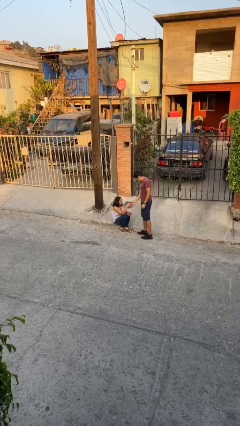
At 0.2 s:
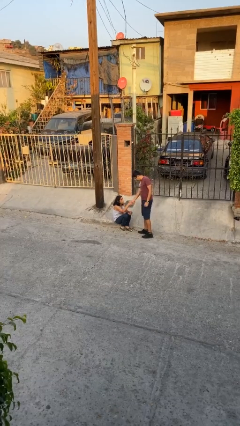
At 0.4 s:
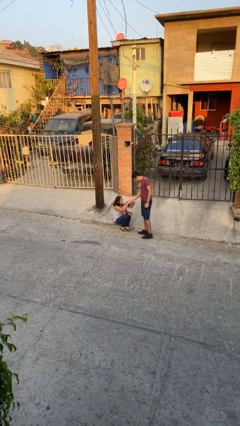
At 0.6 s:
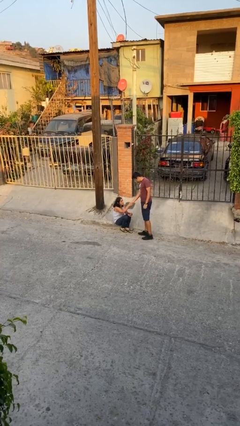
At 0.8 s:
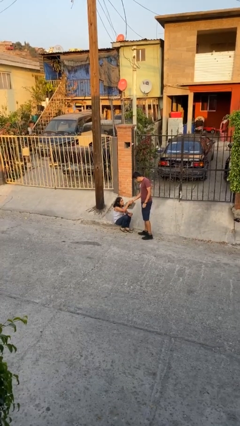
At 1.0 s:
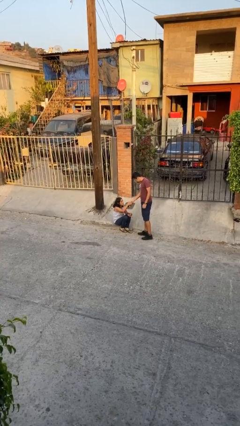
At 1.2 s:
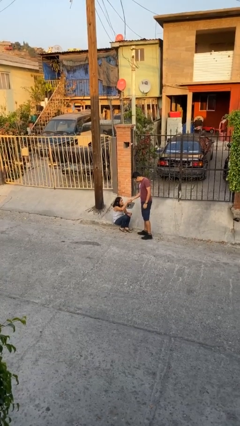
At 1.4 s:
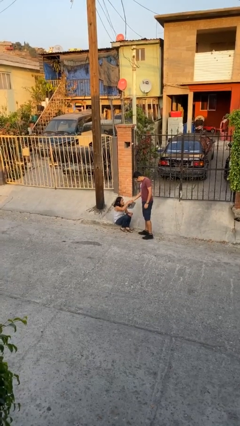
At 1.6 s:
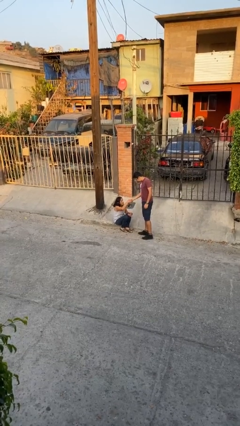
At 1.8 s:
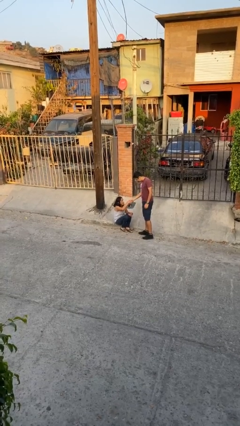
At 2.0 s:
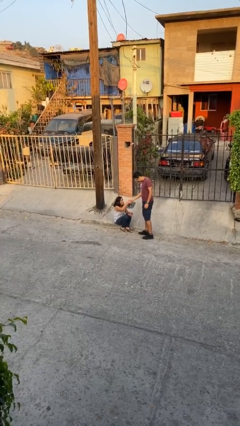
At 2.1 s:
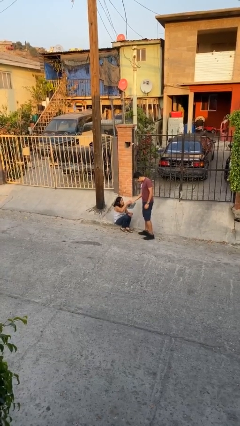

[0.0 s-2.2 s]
person shakes hand

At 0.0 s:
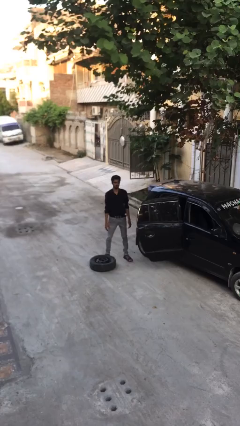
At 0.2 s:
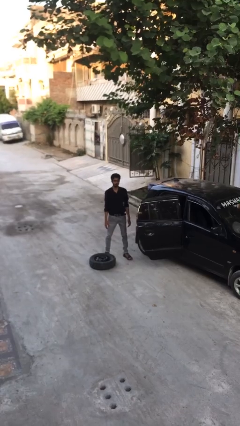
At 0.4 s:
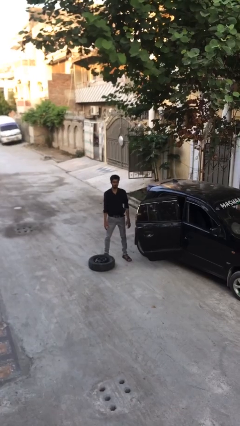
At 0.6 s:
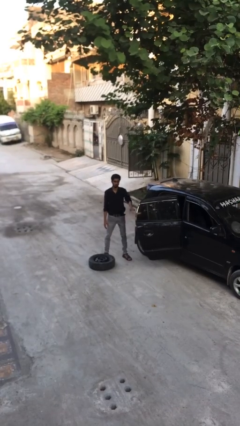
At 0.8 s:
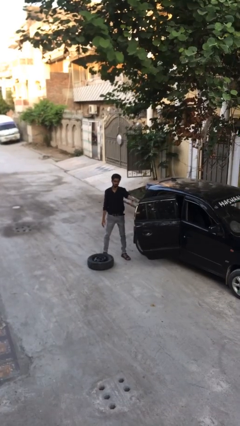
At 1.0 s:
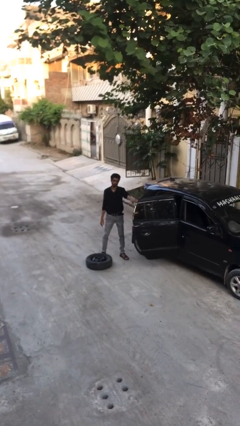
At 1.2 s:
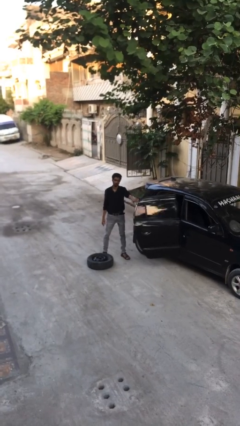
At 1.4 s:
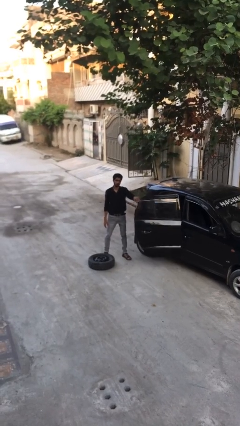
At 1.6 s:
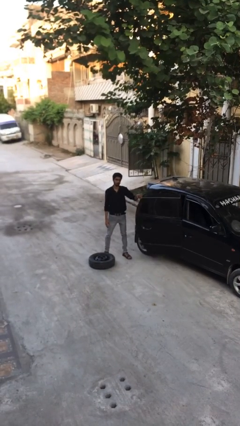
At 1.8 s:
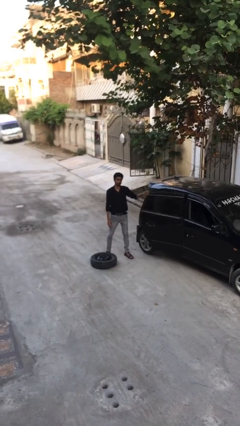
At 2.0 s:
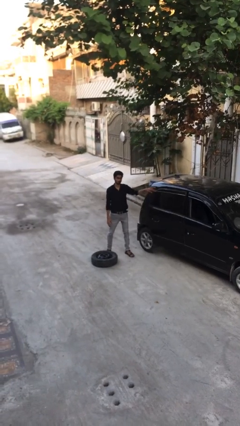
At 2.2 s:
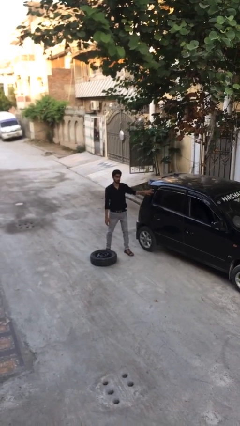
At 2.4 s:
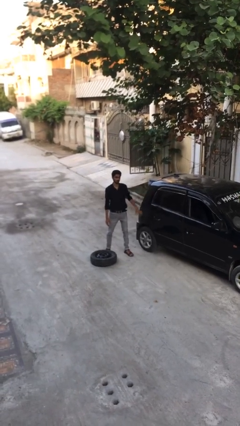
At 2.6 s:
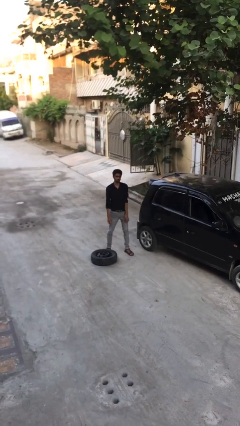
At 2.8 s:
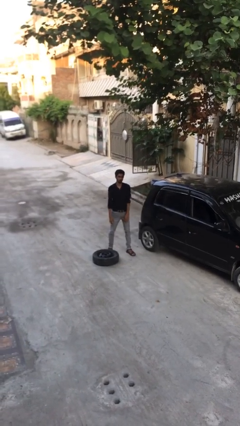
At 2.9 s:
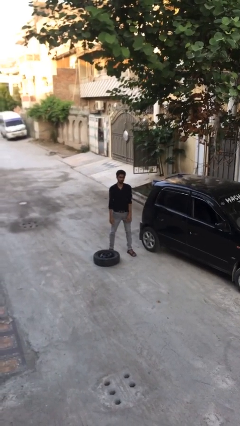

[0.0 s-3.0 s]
person closes car door

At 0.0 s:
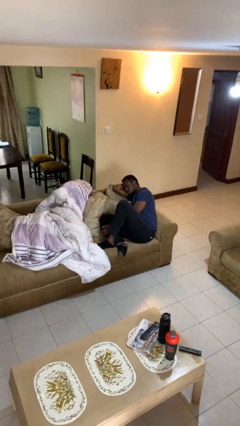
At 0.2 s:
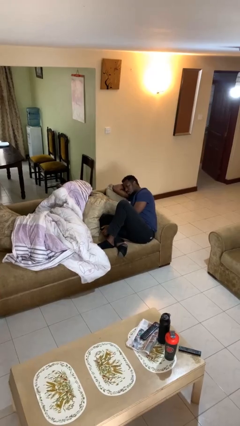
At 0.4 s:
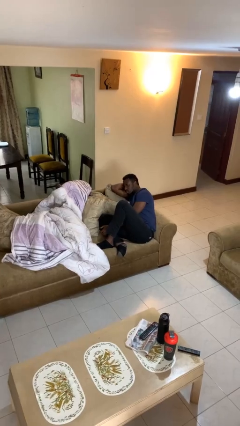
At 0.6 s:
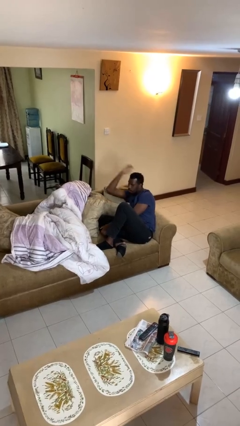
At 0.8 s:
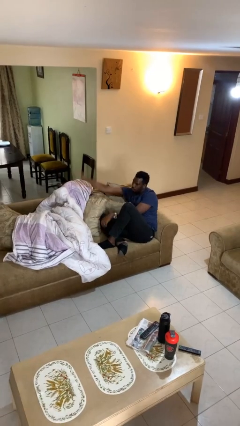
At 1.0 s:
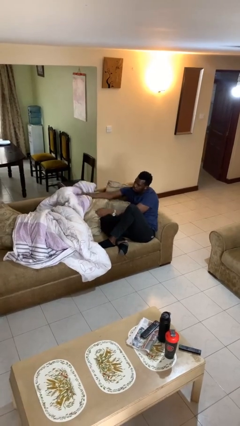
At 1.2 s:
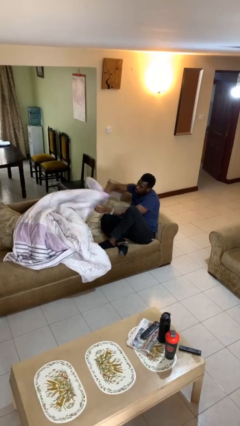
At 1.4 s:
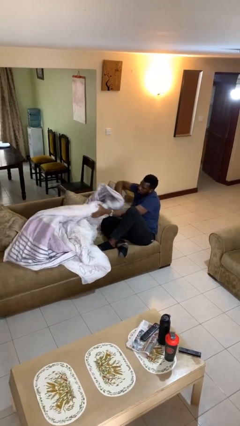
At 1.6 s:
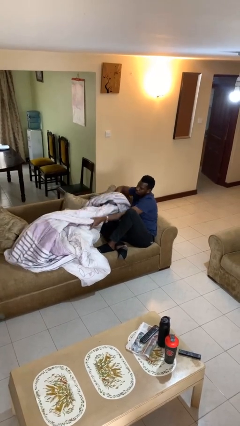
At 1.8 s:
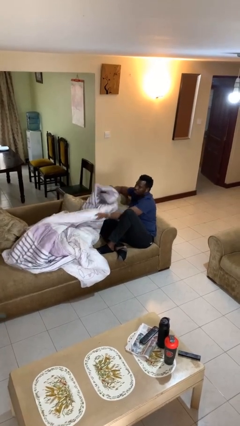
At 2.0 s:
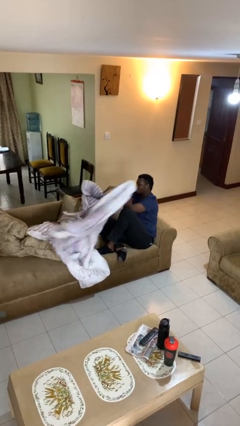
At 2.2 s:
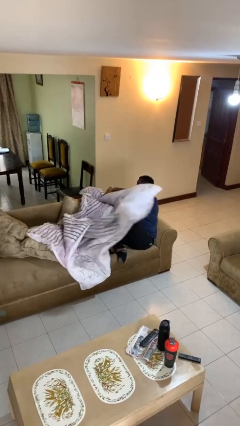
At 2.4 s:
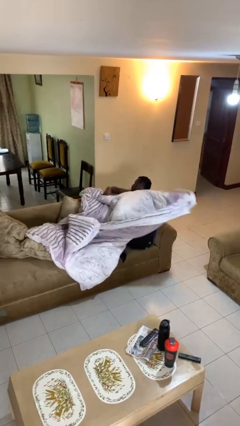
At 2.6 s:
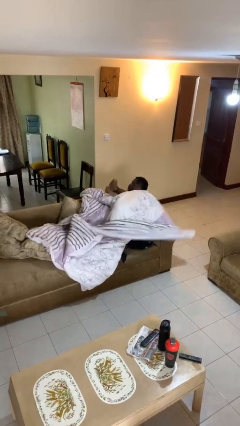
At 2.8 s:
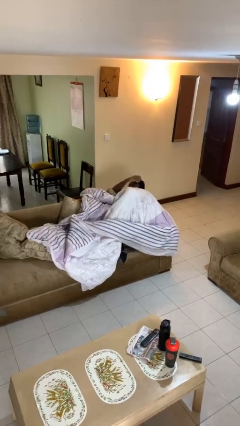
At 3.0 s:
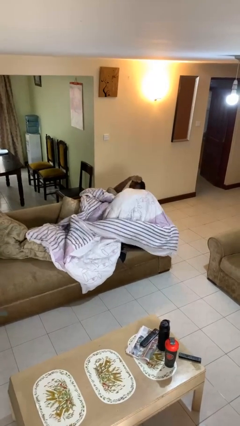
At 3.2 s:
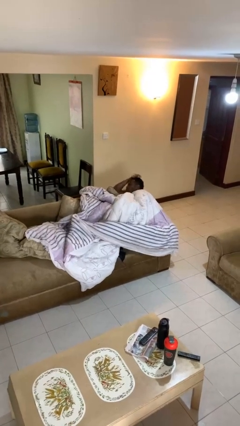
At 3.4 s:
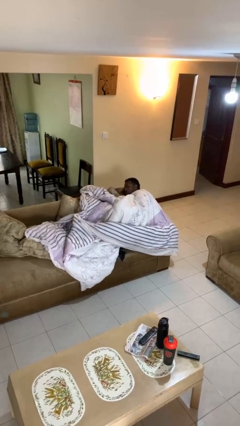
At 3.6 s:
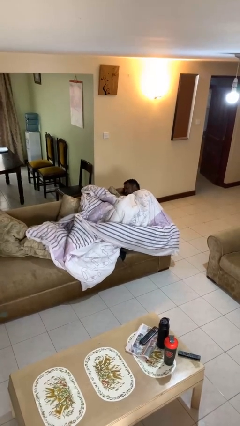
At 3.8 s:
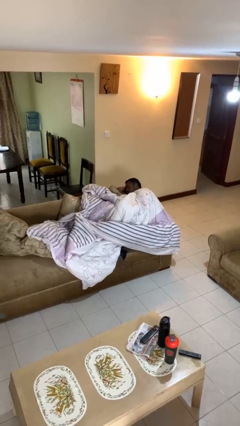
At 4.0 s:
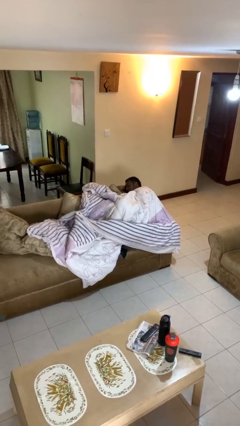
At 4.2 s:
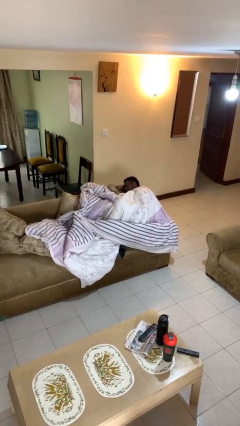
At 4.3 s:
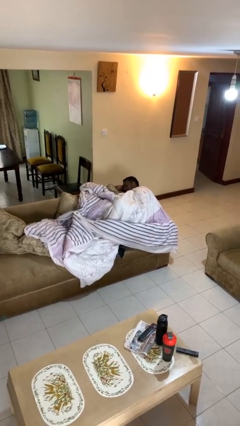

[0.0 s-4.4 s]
person covers with blanket

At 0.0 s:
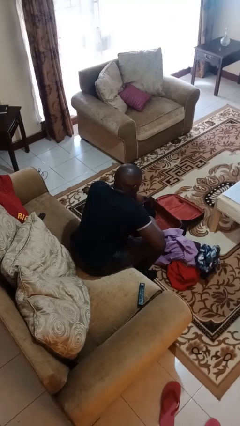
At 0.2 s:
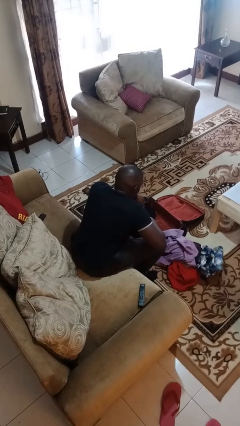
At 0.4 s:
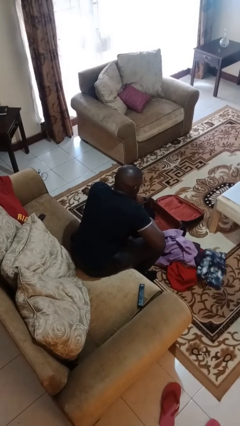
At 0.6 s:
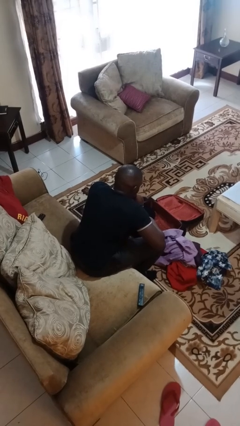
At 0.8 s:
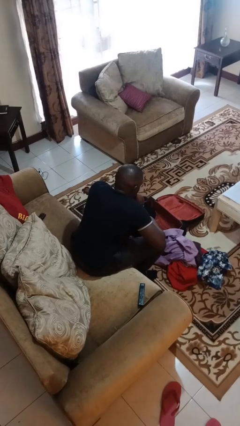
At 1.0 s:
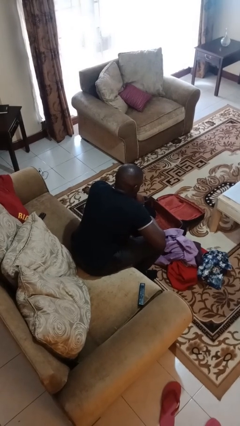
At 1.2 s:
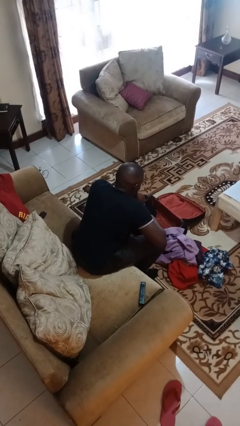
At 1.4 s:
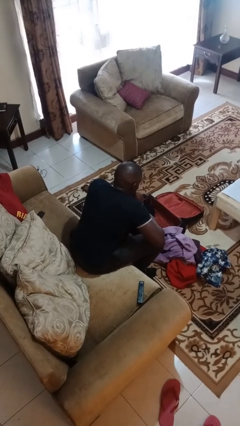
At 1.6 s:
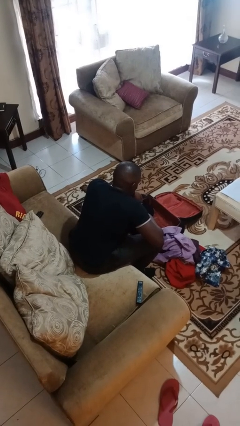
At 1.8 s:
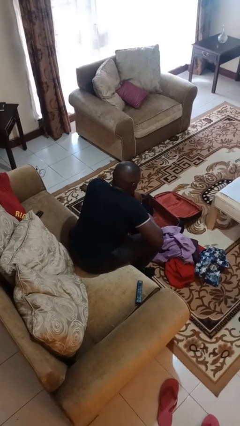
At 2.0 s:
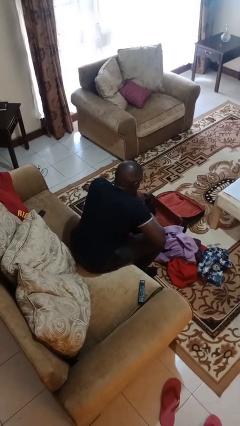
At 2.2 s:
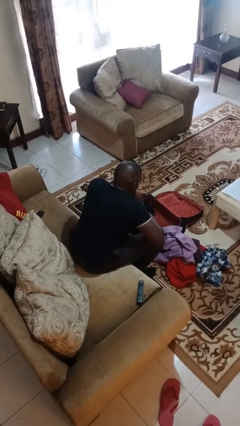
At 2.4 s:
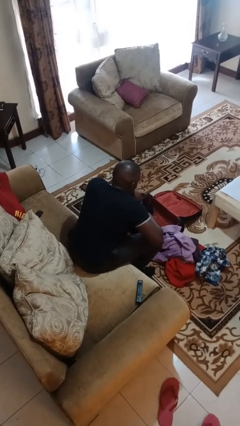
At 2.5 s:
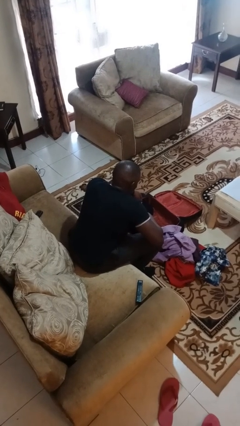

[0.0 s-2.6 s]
person unloads clothes from suitcase

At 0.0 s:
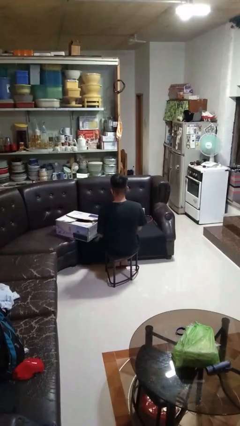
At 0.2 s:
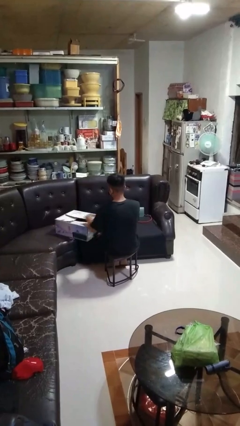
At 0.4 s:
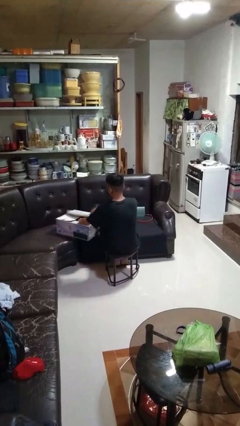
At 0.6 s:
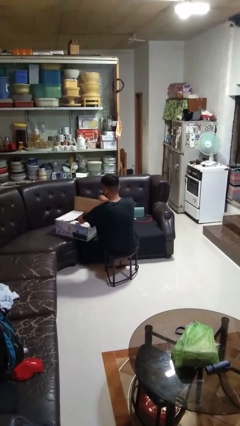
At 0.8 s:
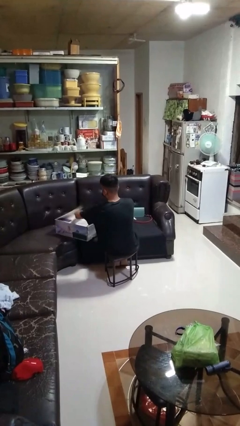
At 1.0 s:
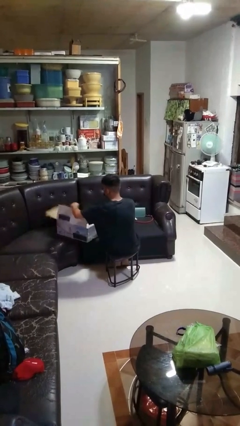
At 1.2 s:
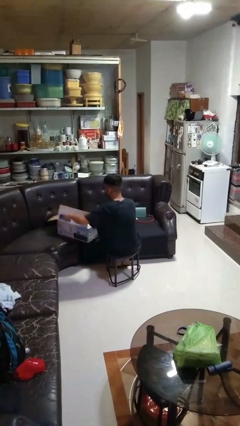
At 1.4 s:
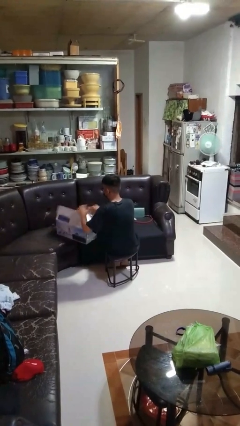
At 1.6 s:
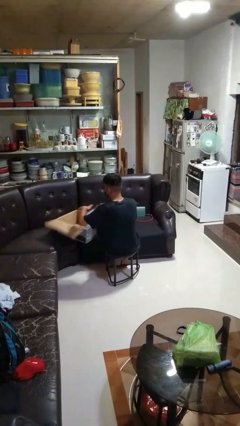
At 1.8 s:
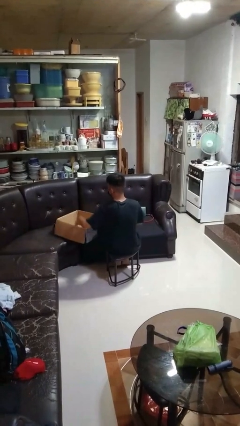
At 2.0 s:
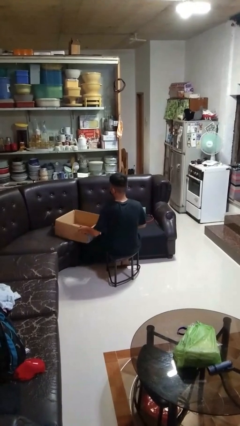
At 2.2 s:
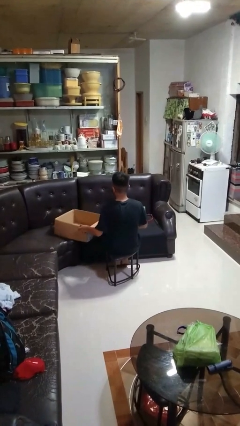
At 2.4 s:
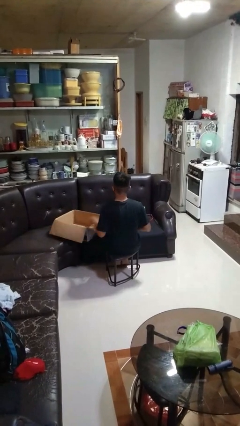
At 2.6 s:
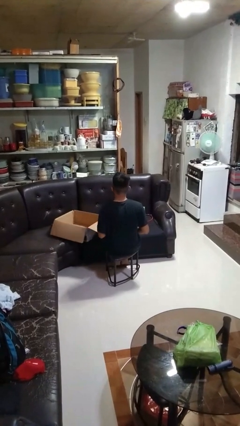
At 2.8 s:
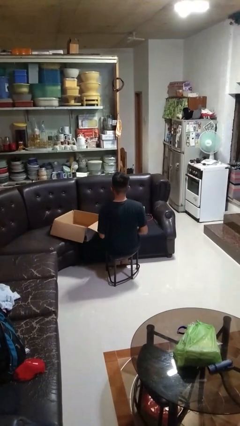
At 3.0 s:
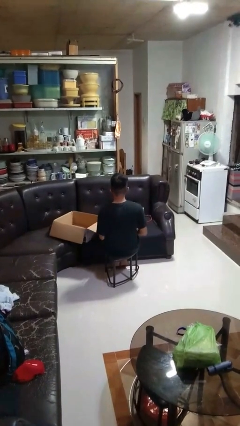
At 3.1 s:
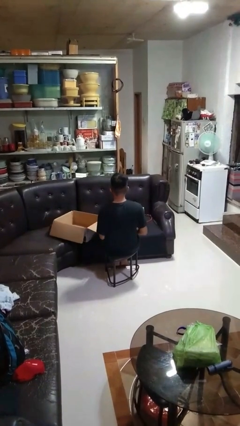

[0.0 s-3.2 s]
person opens box

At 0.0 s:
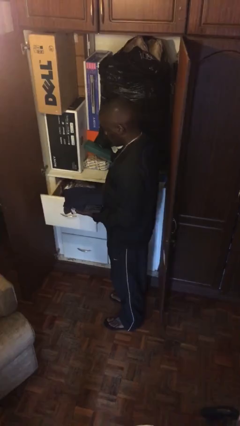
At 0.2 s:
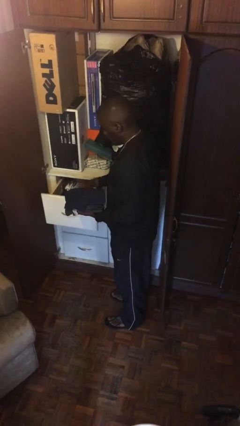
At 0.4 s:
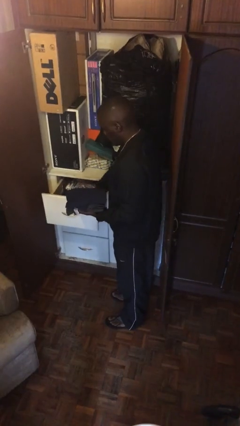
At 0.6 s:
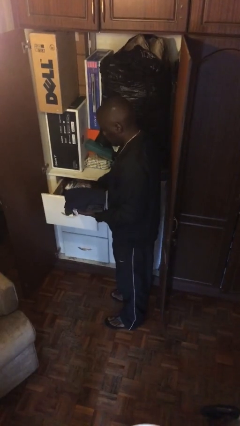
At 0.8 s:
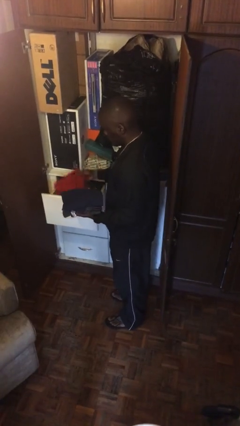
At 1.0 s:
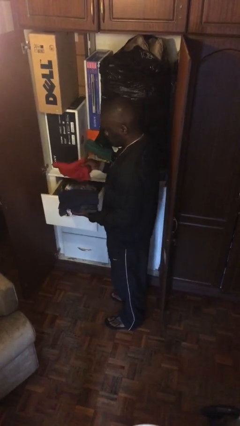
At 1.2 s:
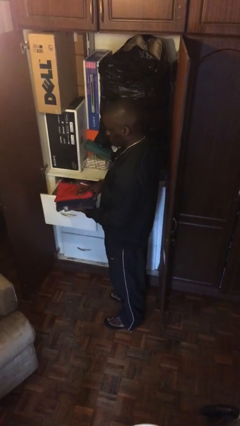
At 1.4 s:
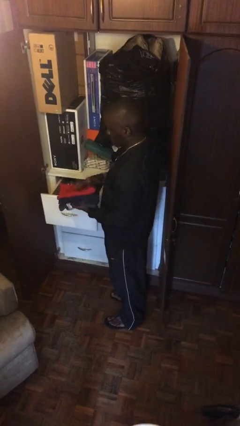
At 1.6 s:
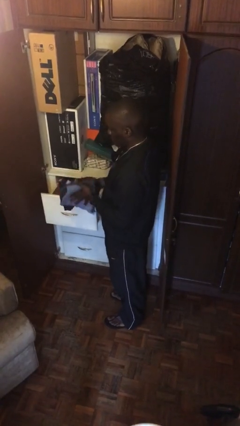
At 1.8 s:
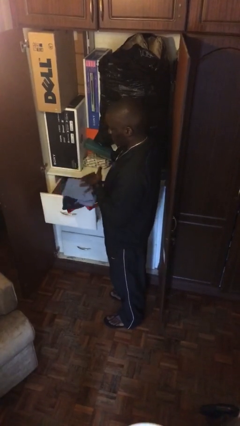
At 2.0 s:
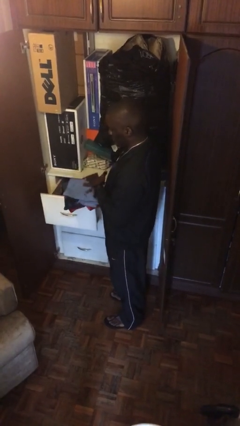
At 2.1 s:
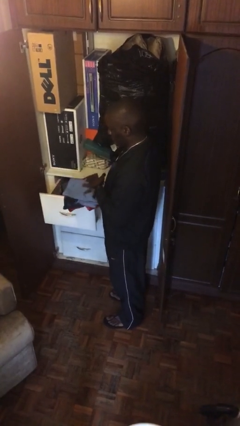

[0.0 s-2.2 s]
person takes clothes from dresser
